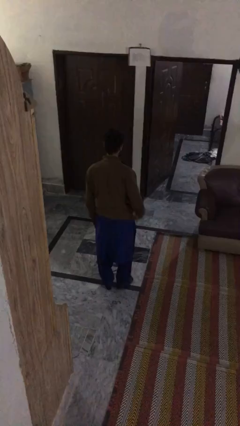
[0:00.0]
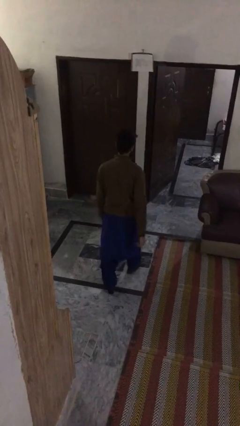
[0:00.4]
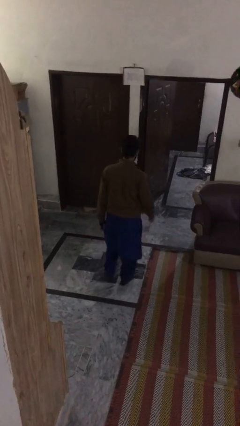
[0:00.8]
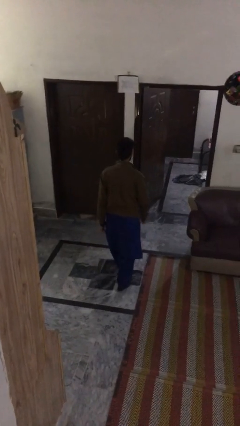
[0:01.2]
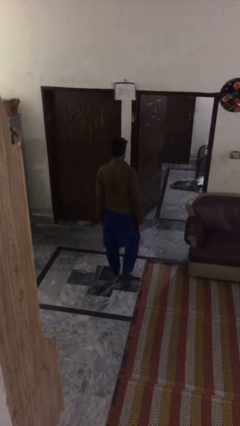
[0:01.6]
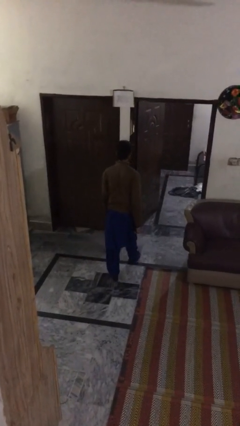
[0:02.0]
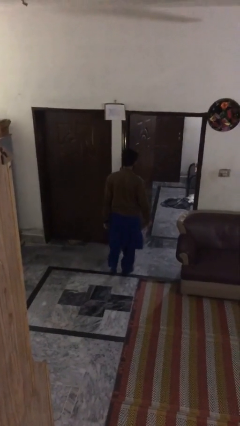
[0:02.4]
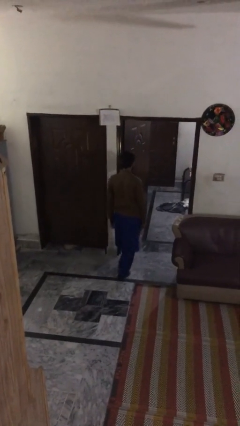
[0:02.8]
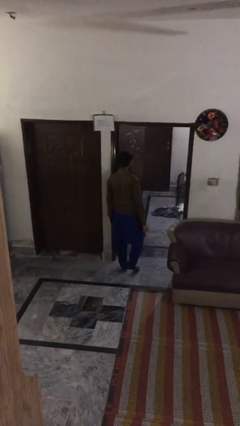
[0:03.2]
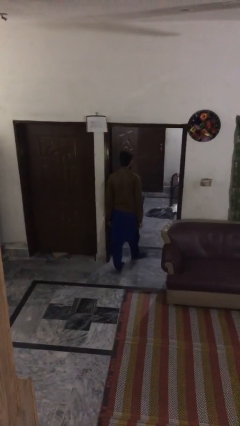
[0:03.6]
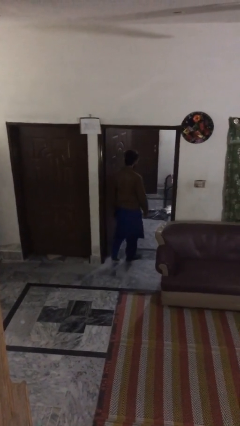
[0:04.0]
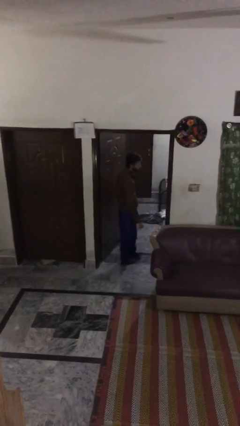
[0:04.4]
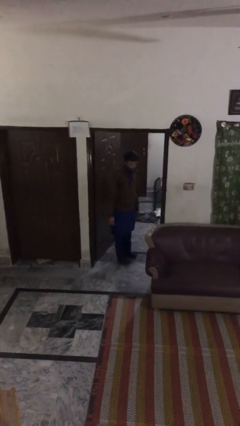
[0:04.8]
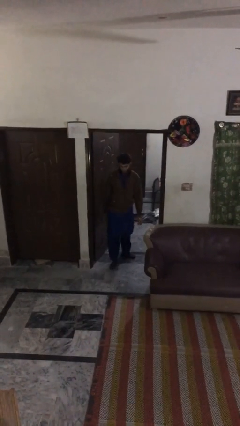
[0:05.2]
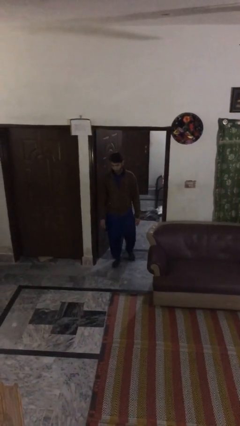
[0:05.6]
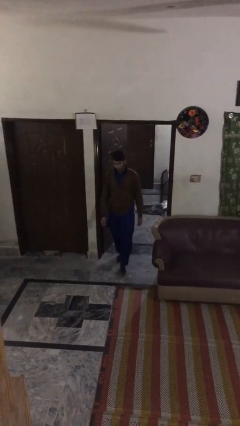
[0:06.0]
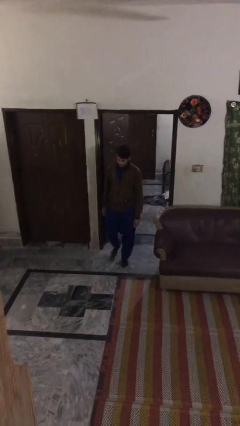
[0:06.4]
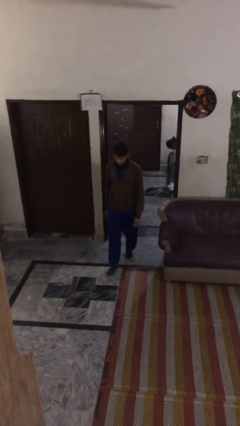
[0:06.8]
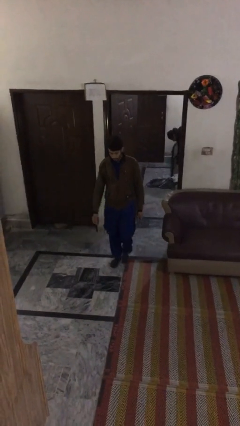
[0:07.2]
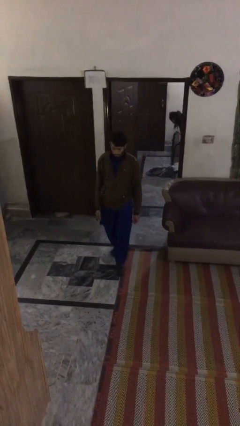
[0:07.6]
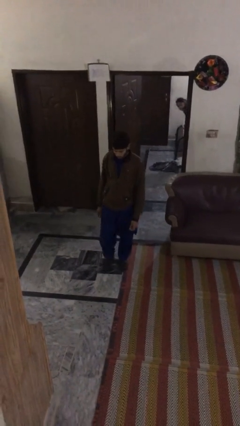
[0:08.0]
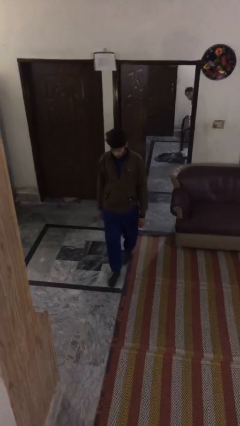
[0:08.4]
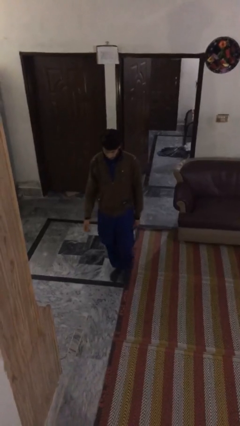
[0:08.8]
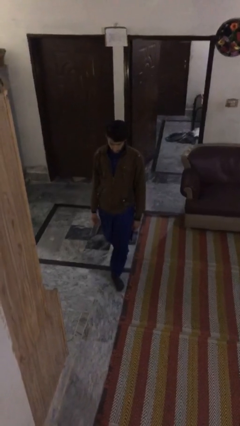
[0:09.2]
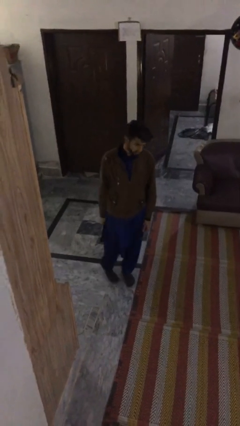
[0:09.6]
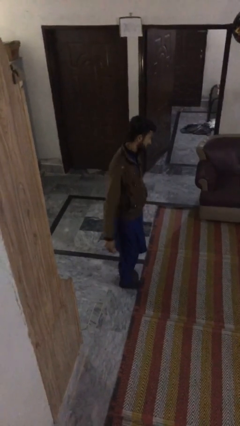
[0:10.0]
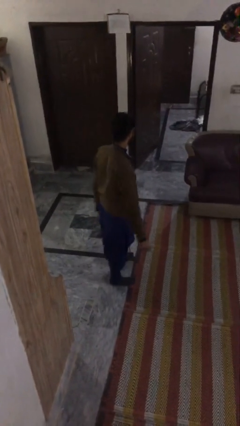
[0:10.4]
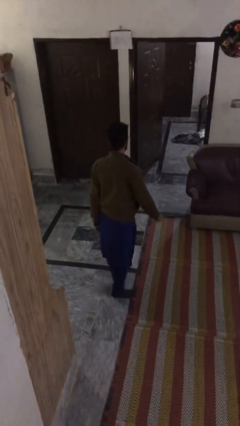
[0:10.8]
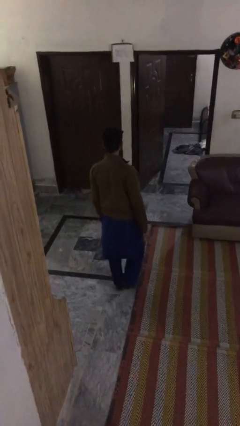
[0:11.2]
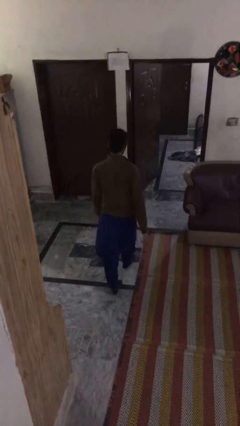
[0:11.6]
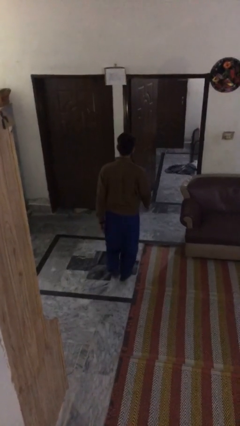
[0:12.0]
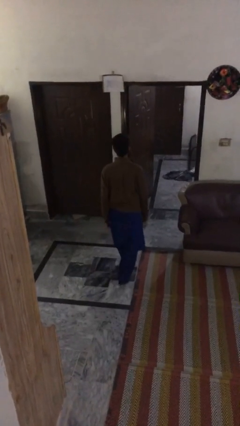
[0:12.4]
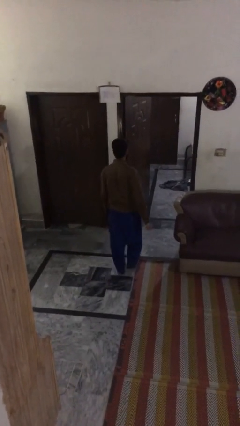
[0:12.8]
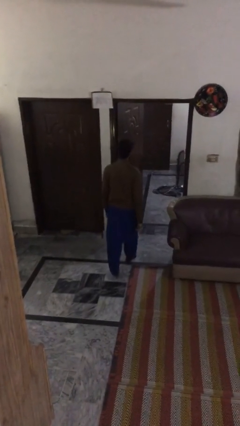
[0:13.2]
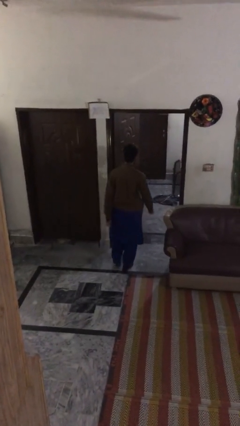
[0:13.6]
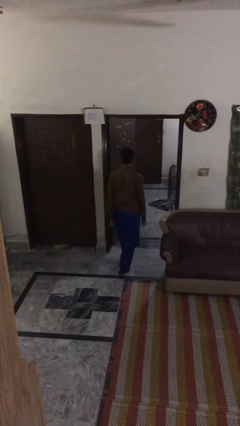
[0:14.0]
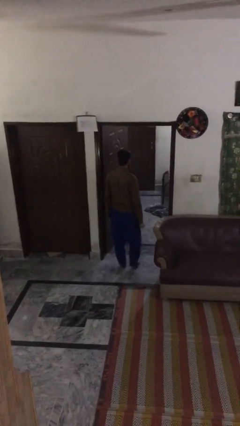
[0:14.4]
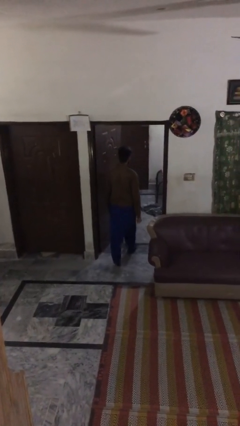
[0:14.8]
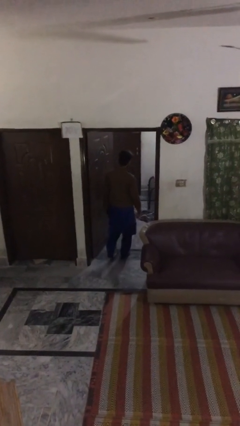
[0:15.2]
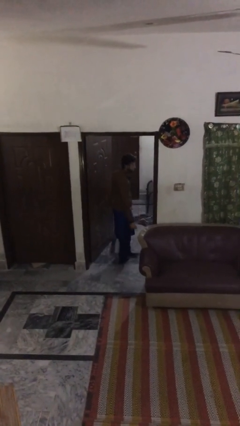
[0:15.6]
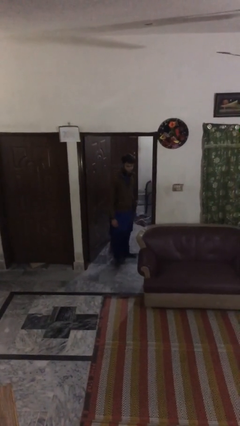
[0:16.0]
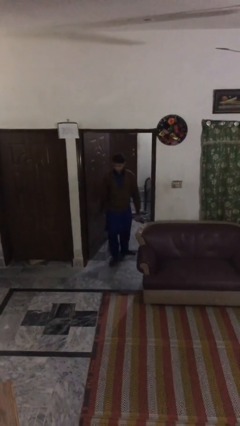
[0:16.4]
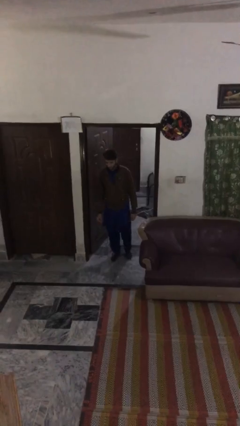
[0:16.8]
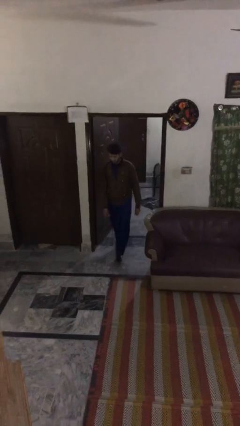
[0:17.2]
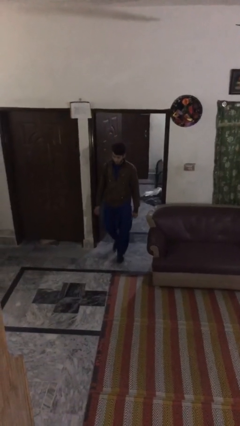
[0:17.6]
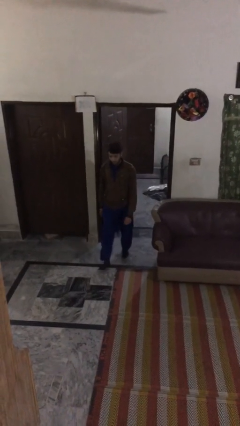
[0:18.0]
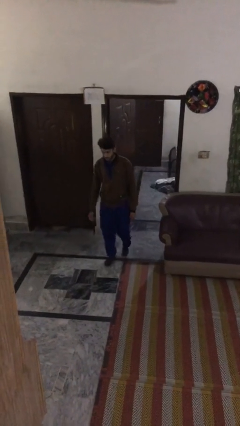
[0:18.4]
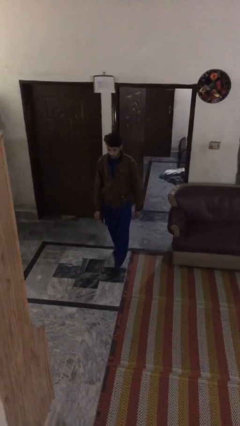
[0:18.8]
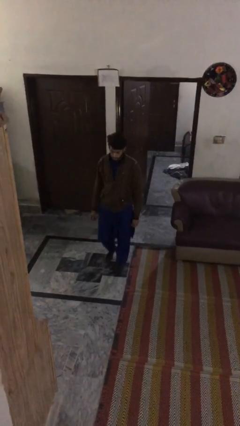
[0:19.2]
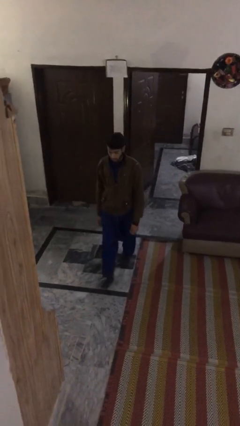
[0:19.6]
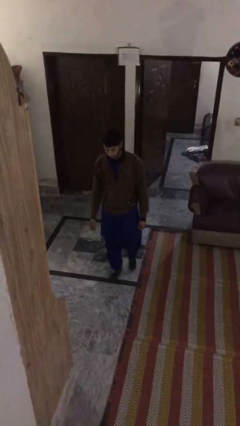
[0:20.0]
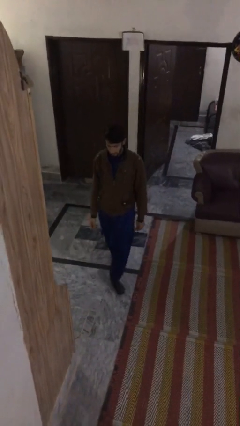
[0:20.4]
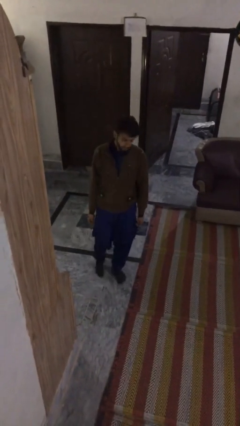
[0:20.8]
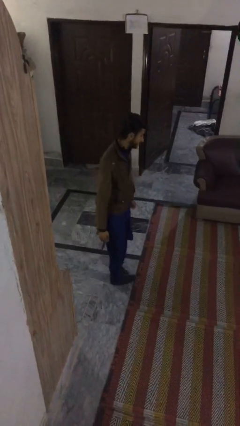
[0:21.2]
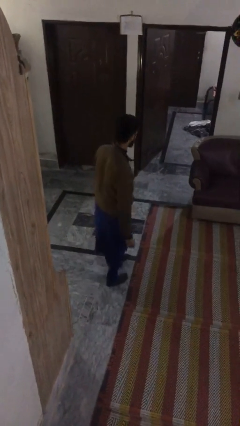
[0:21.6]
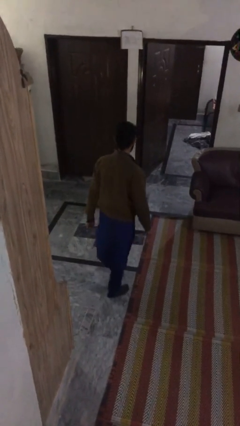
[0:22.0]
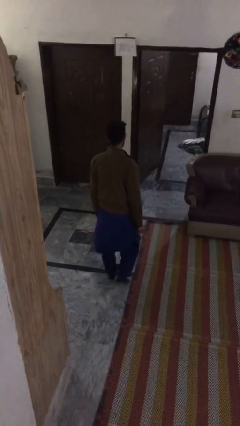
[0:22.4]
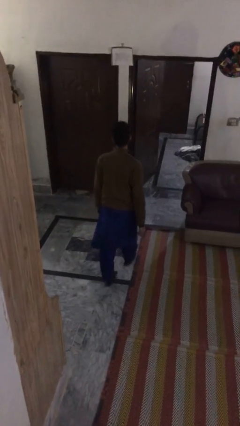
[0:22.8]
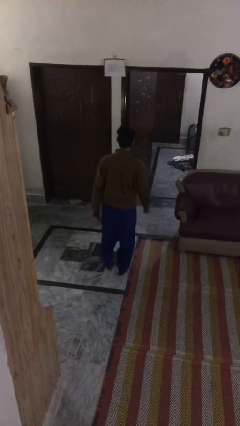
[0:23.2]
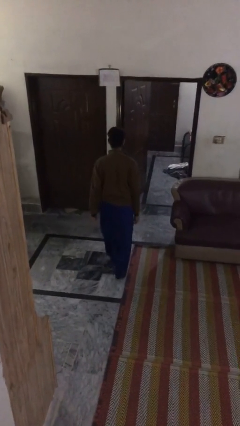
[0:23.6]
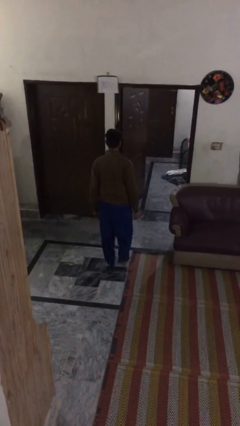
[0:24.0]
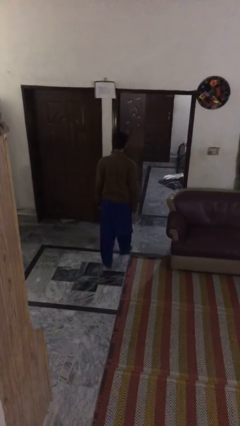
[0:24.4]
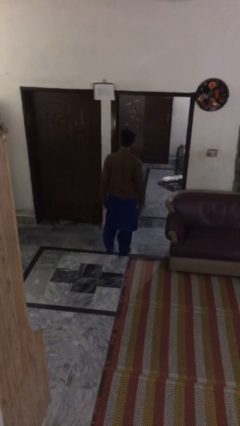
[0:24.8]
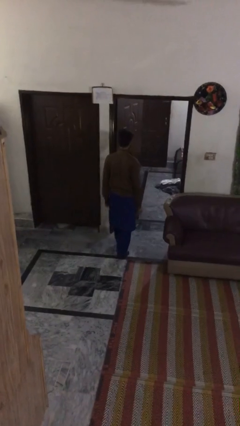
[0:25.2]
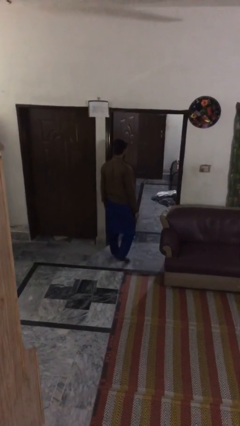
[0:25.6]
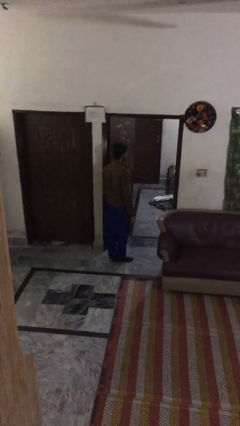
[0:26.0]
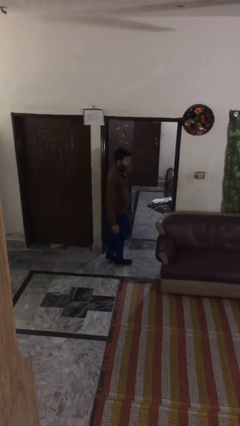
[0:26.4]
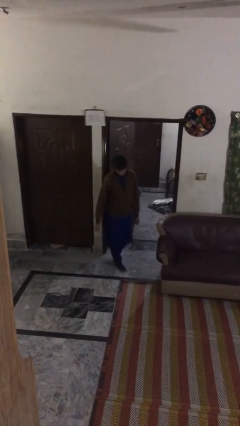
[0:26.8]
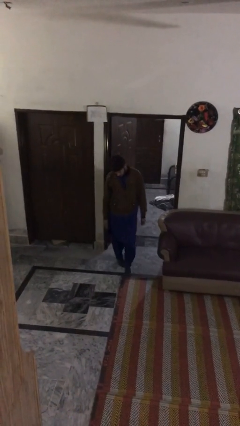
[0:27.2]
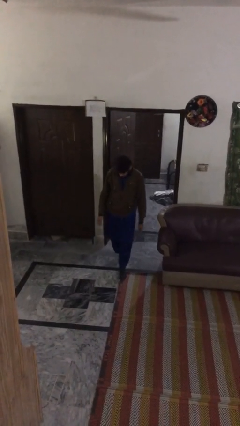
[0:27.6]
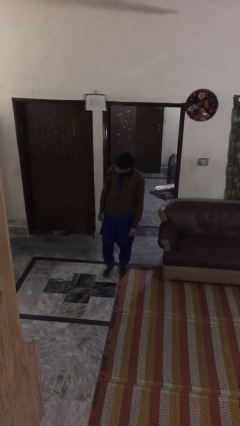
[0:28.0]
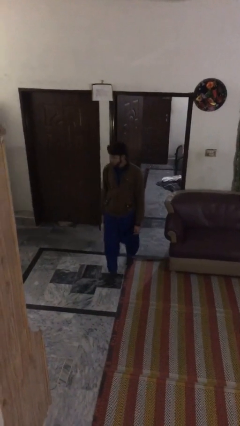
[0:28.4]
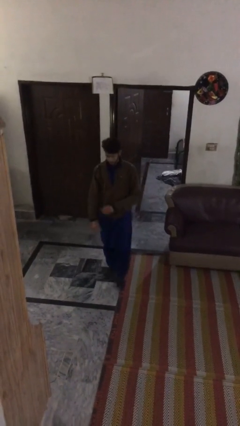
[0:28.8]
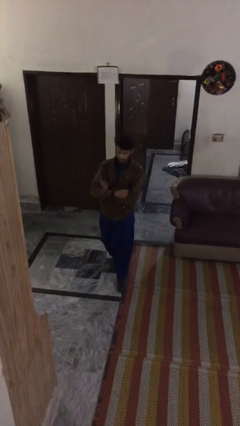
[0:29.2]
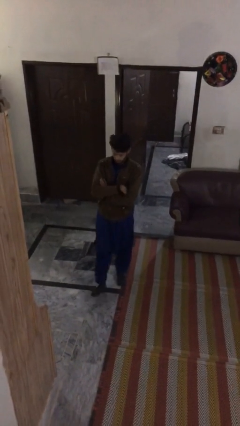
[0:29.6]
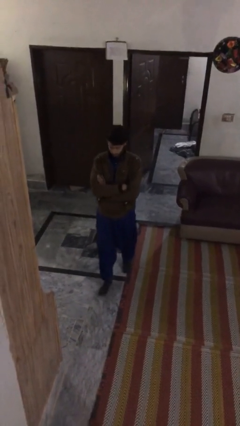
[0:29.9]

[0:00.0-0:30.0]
person walks

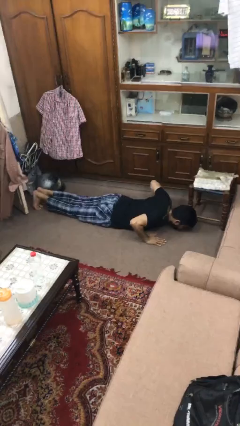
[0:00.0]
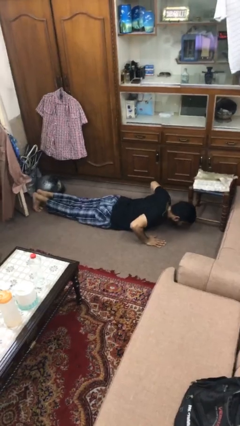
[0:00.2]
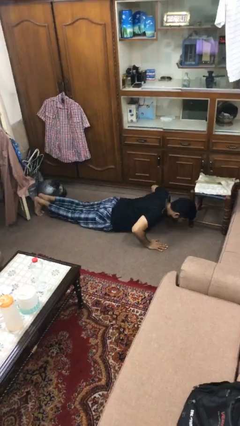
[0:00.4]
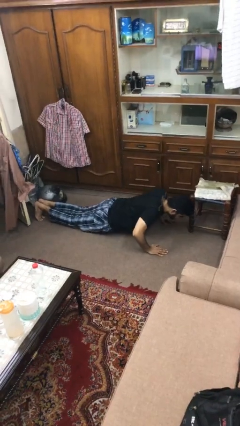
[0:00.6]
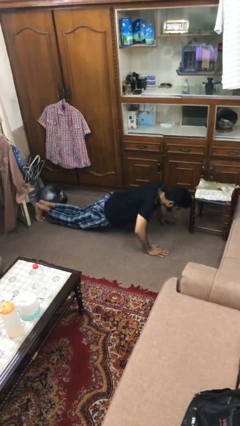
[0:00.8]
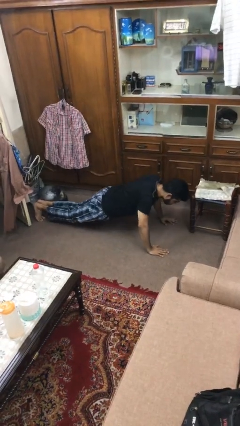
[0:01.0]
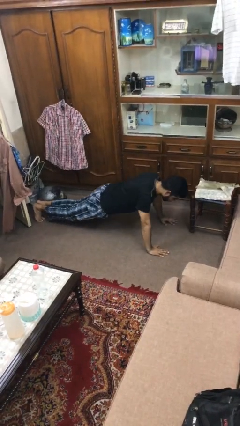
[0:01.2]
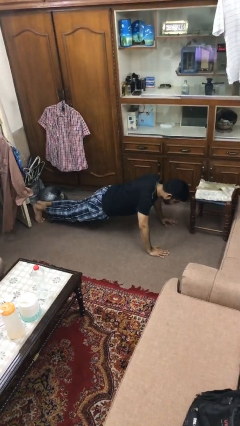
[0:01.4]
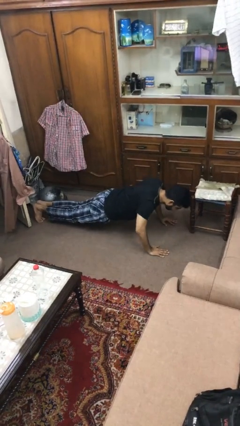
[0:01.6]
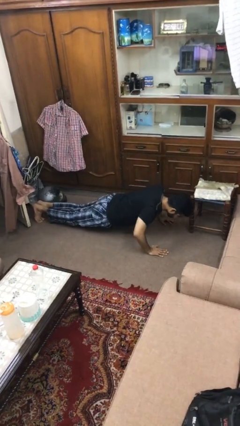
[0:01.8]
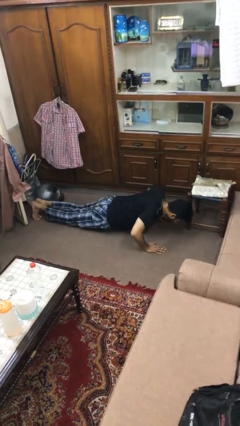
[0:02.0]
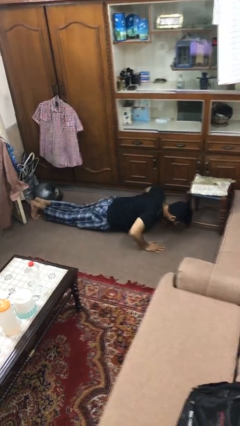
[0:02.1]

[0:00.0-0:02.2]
person exercises with pushup

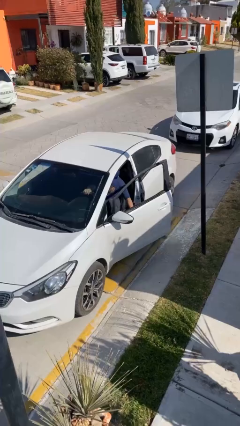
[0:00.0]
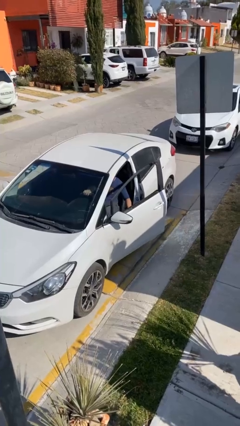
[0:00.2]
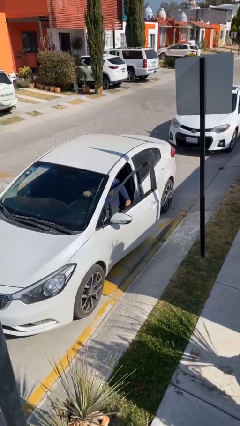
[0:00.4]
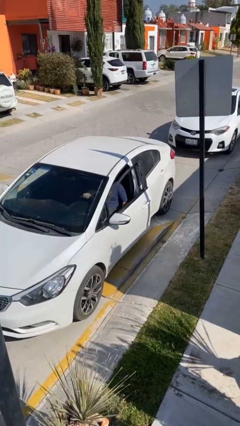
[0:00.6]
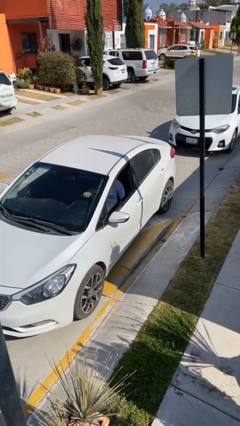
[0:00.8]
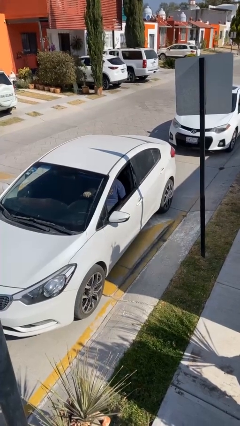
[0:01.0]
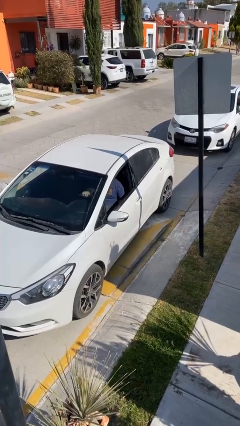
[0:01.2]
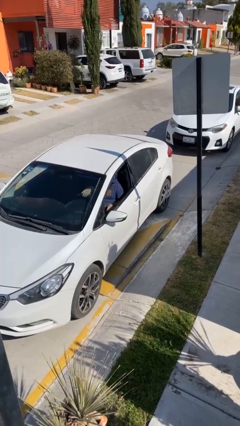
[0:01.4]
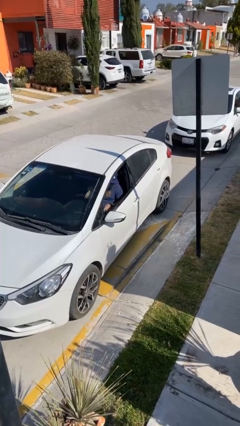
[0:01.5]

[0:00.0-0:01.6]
person closes car door
